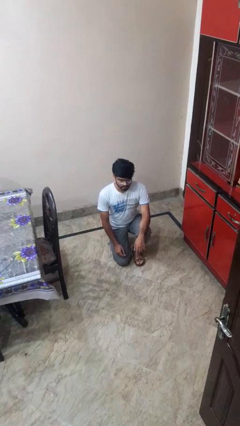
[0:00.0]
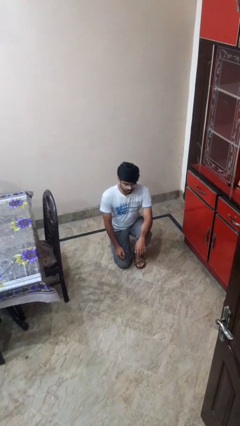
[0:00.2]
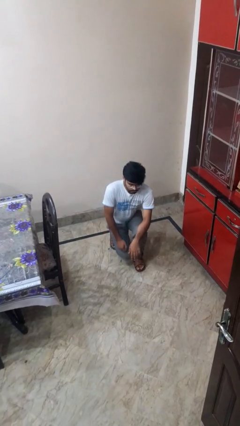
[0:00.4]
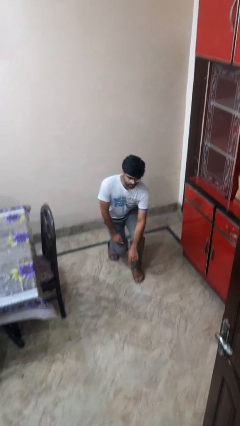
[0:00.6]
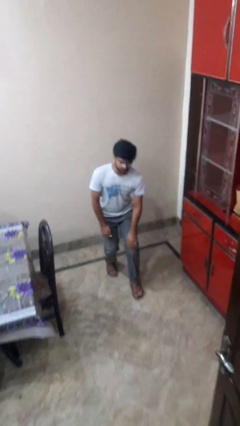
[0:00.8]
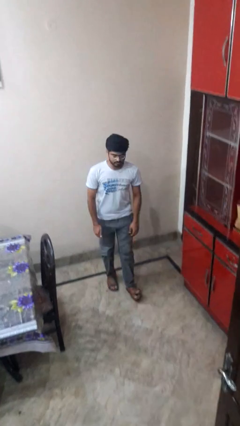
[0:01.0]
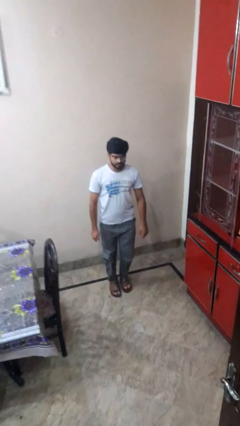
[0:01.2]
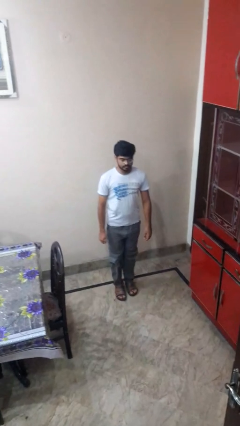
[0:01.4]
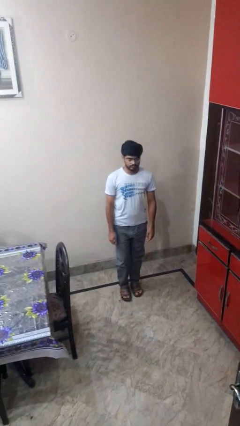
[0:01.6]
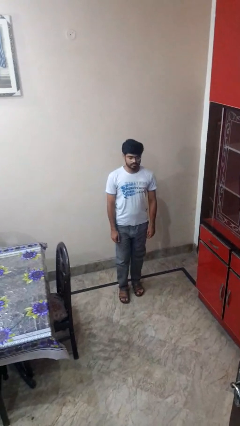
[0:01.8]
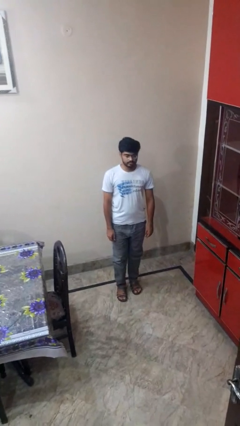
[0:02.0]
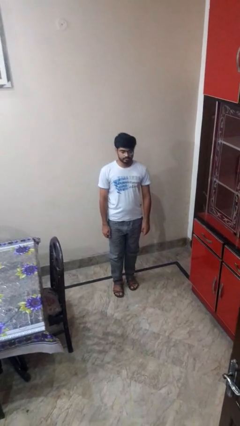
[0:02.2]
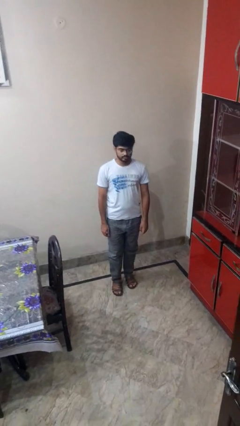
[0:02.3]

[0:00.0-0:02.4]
person stands up from floor

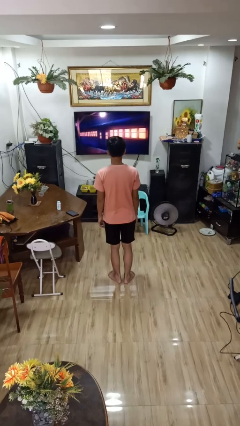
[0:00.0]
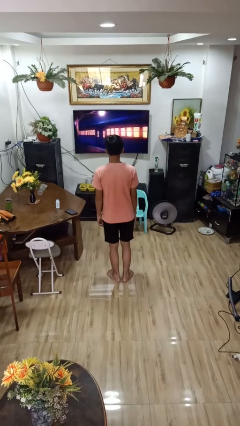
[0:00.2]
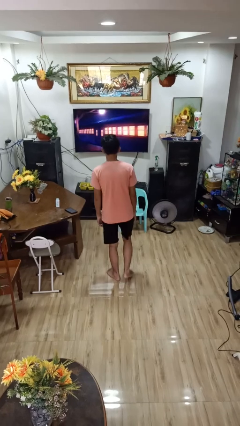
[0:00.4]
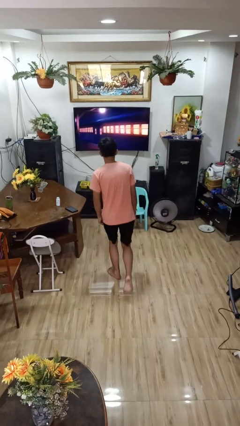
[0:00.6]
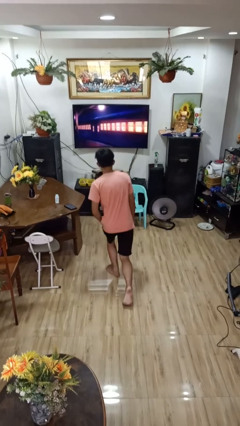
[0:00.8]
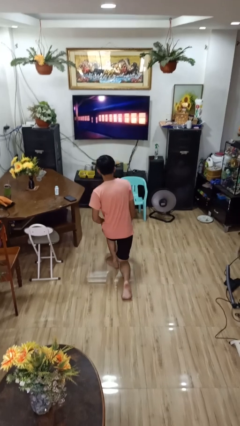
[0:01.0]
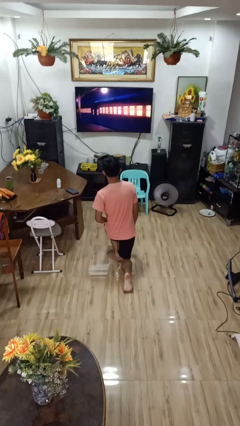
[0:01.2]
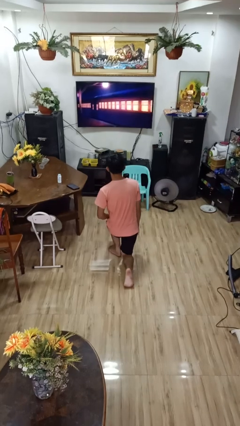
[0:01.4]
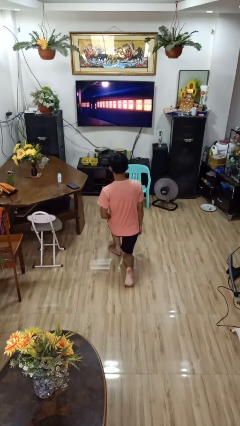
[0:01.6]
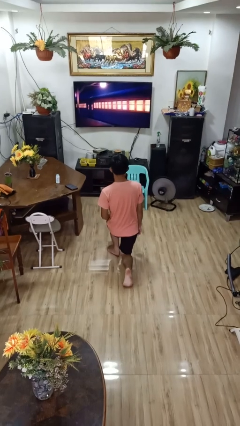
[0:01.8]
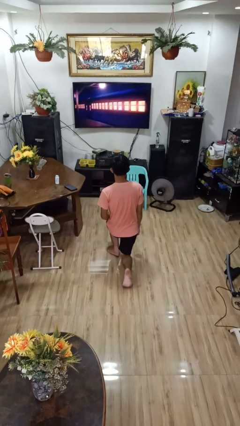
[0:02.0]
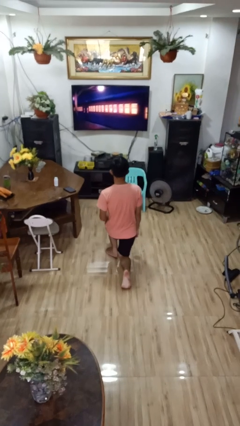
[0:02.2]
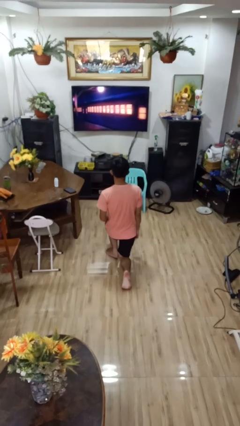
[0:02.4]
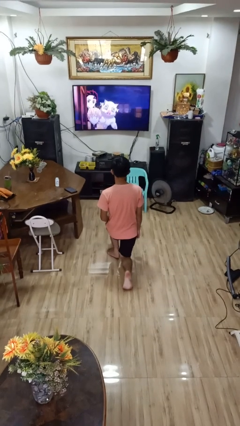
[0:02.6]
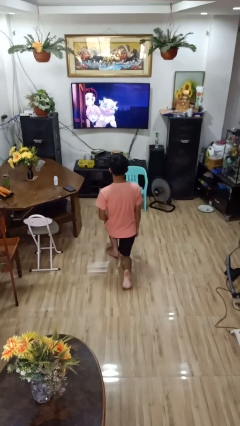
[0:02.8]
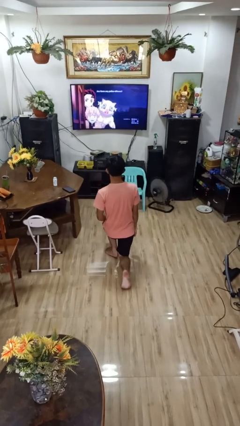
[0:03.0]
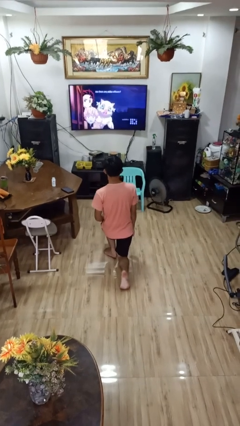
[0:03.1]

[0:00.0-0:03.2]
person kneels

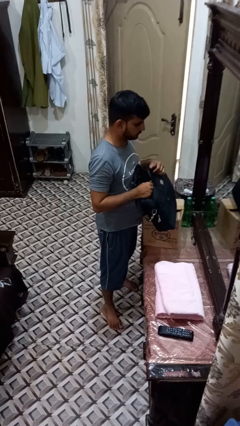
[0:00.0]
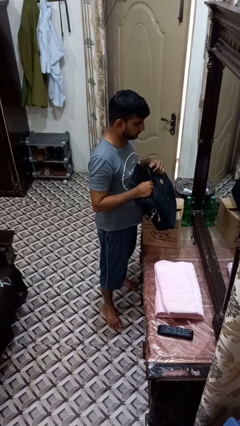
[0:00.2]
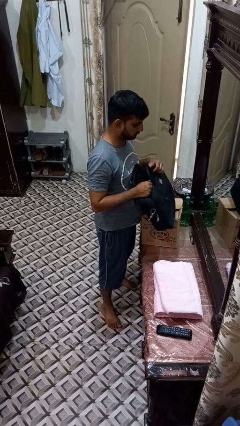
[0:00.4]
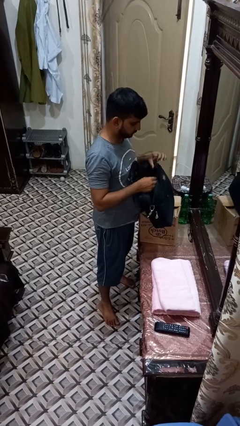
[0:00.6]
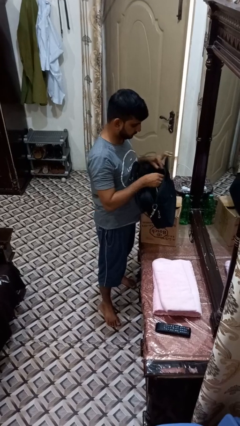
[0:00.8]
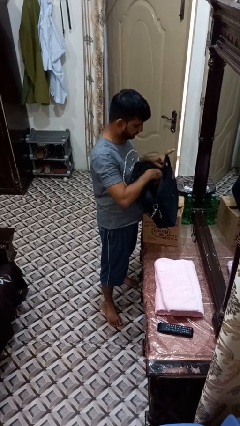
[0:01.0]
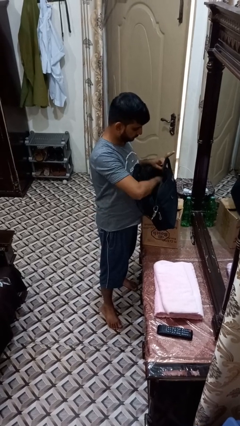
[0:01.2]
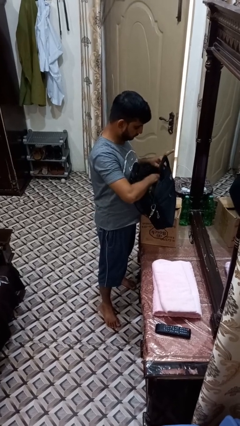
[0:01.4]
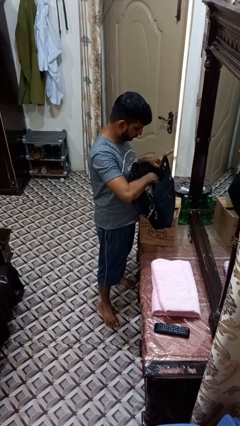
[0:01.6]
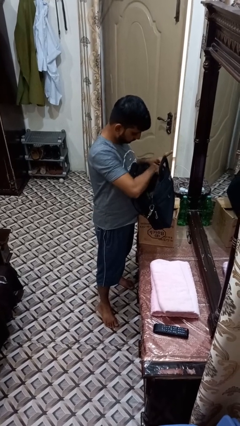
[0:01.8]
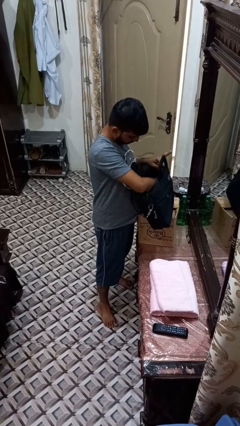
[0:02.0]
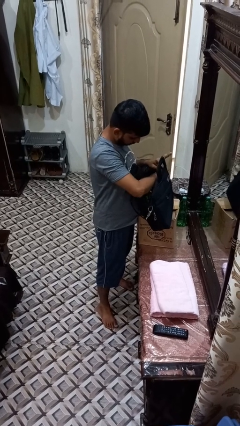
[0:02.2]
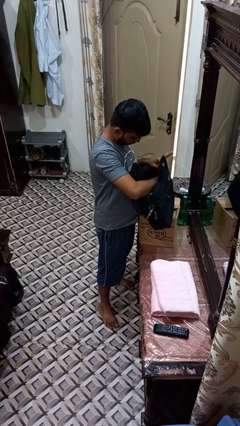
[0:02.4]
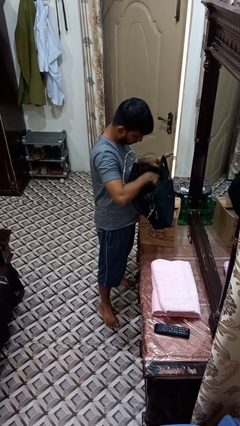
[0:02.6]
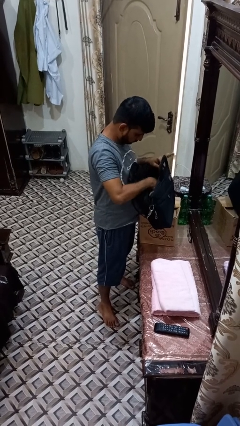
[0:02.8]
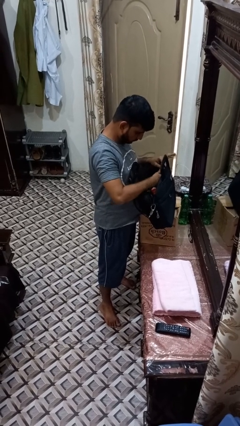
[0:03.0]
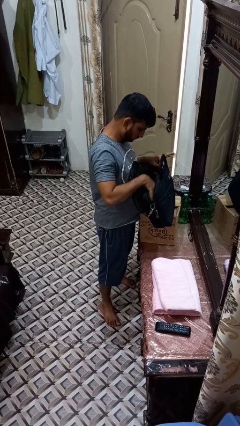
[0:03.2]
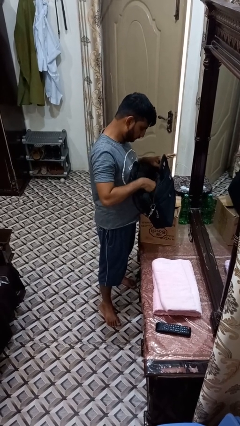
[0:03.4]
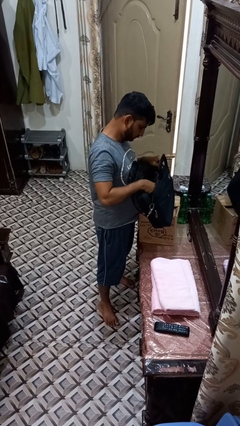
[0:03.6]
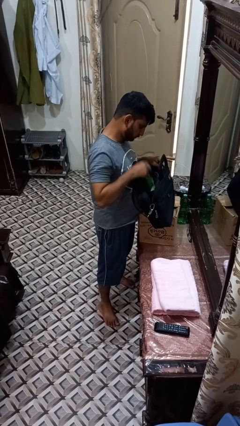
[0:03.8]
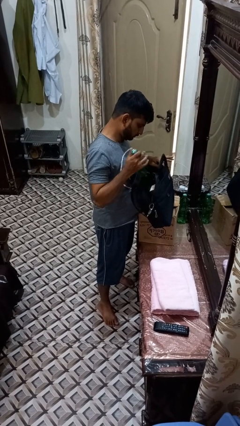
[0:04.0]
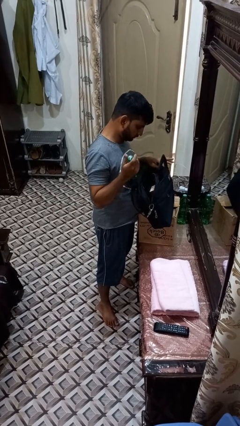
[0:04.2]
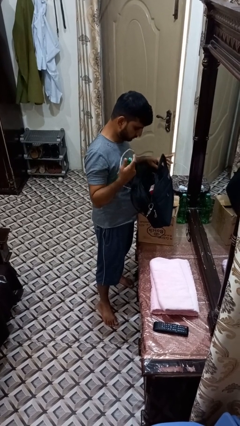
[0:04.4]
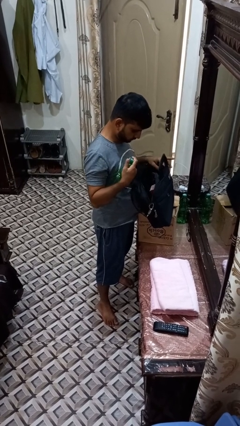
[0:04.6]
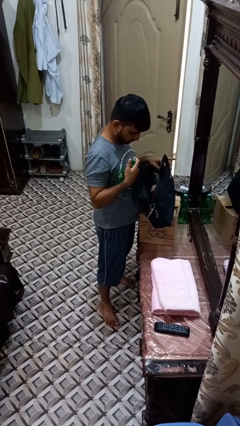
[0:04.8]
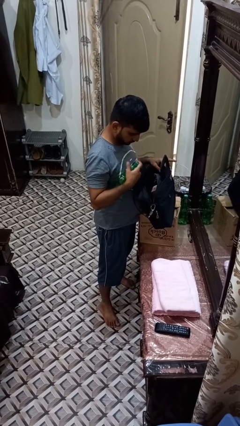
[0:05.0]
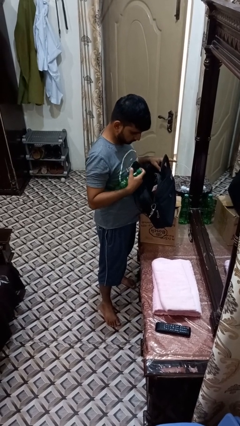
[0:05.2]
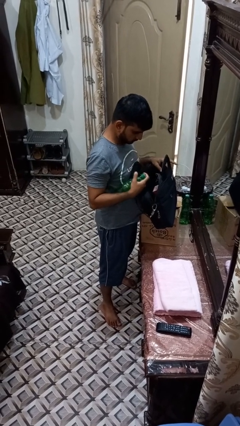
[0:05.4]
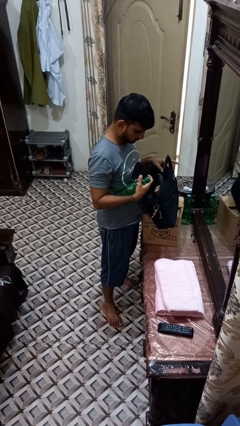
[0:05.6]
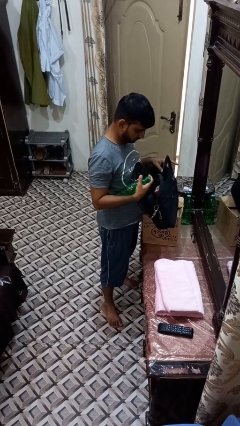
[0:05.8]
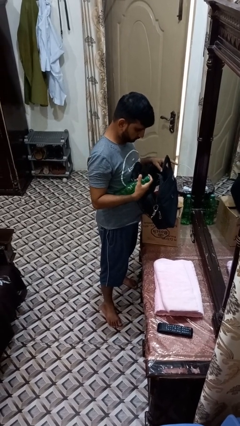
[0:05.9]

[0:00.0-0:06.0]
person searches in bag

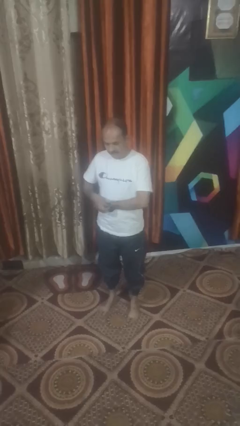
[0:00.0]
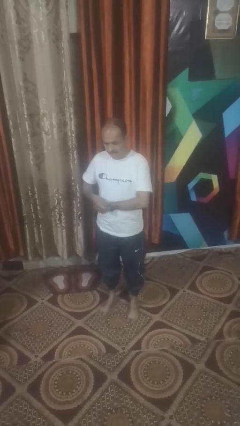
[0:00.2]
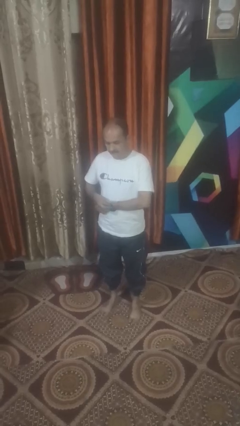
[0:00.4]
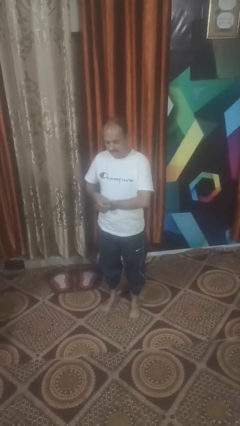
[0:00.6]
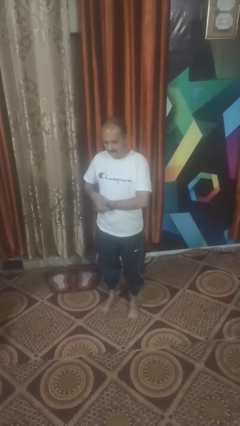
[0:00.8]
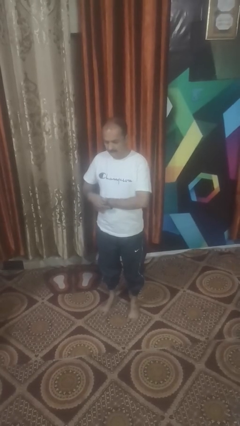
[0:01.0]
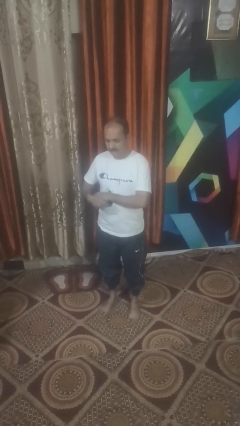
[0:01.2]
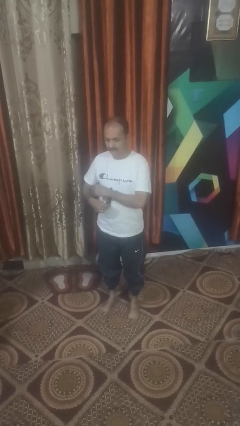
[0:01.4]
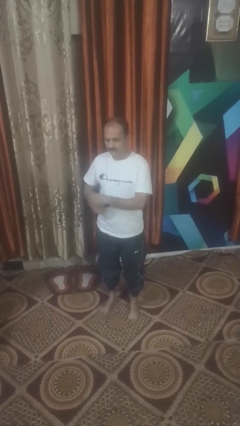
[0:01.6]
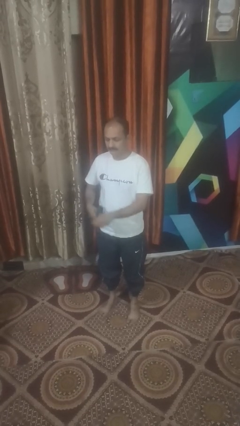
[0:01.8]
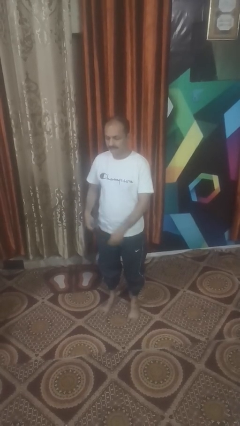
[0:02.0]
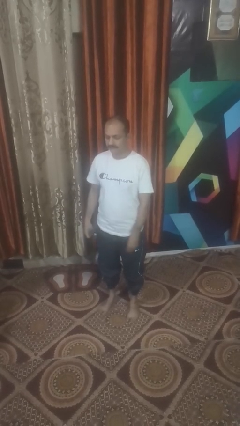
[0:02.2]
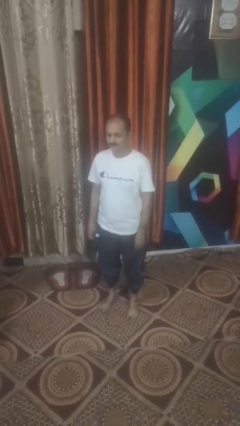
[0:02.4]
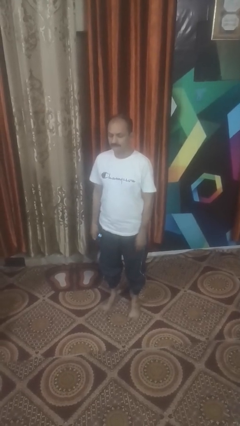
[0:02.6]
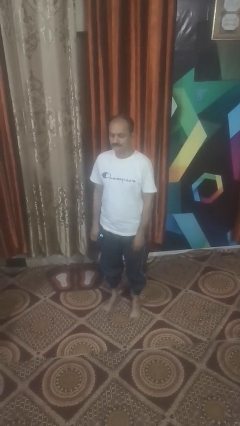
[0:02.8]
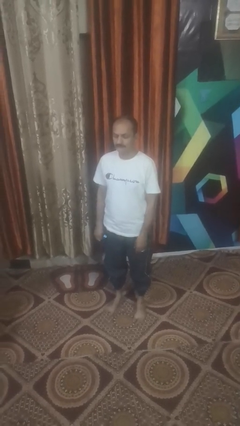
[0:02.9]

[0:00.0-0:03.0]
person takes off wristwatch

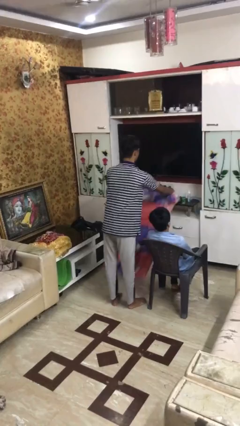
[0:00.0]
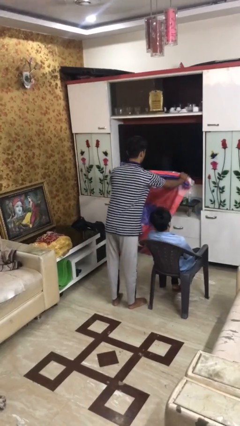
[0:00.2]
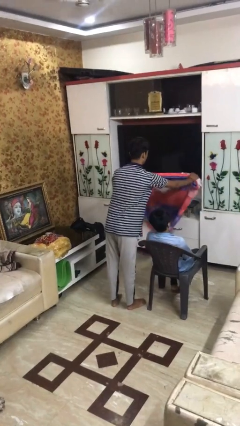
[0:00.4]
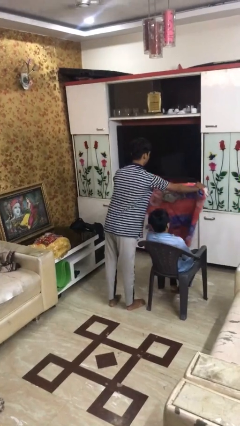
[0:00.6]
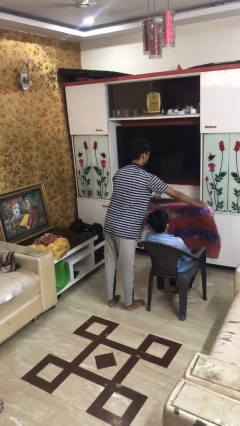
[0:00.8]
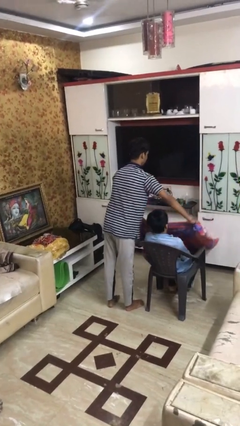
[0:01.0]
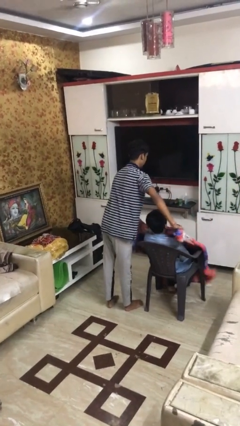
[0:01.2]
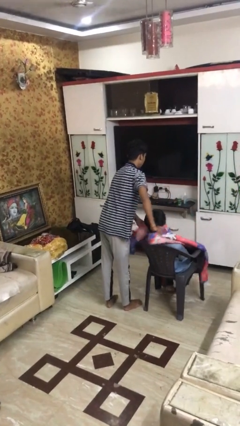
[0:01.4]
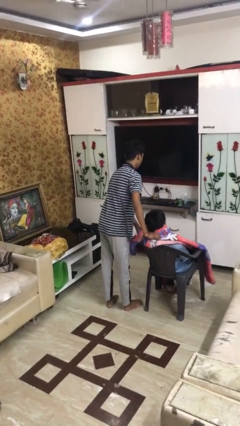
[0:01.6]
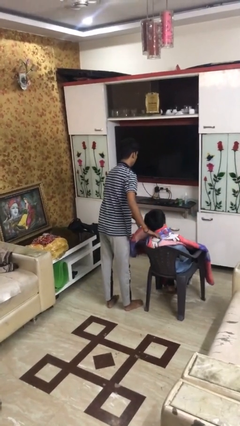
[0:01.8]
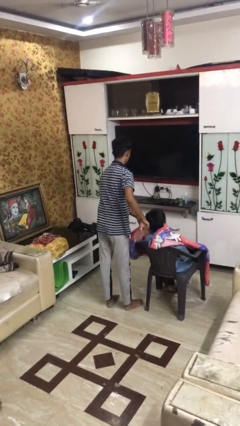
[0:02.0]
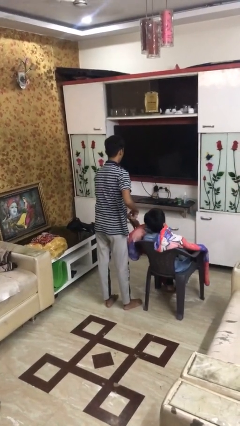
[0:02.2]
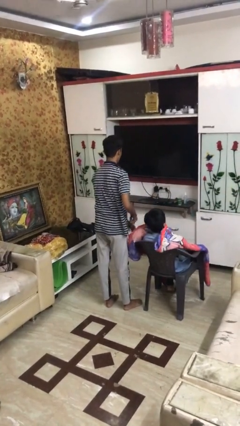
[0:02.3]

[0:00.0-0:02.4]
person covers friend with blanket
